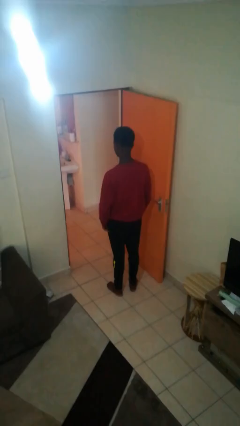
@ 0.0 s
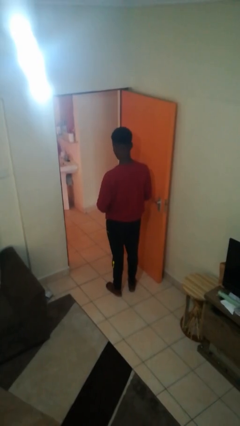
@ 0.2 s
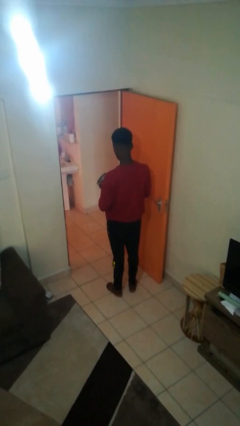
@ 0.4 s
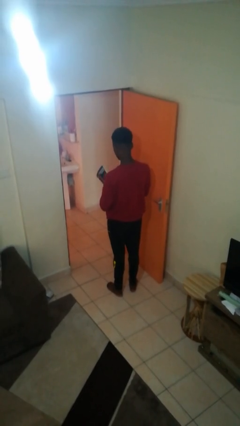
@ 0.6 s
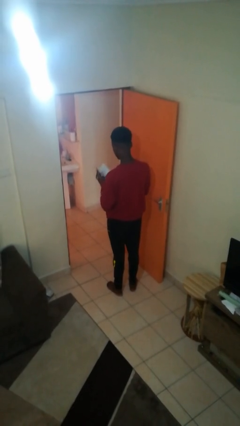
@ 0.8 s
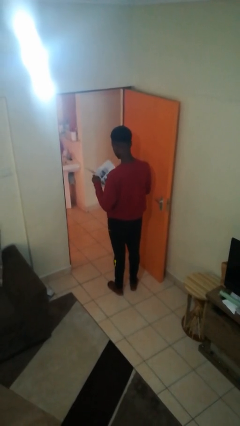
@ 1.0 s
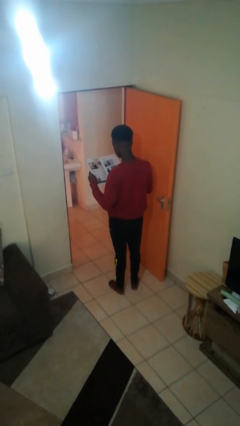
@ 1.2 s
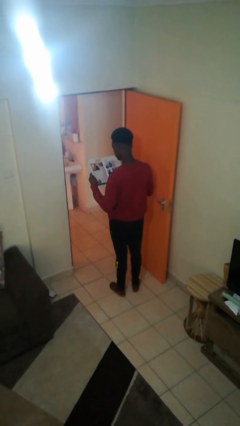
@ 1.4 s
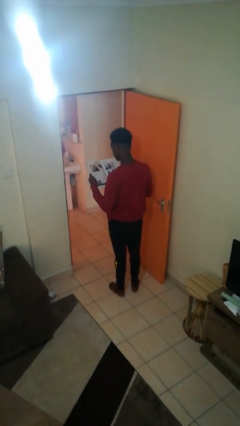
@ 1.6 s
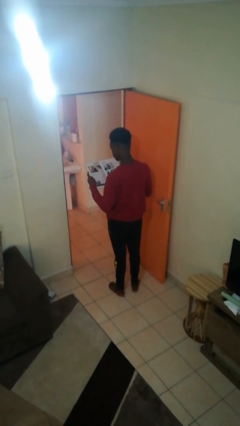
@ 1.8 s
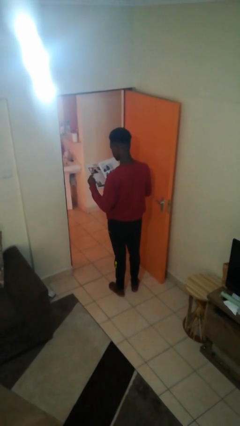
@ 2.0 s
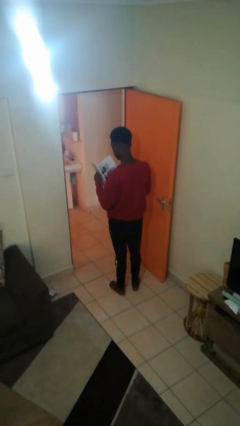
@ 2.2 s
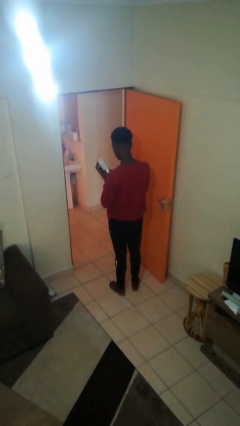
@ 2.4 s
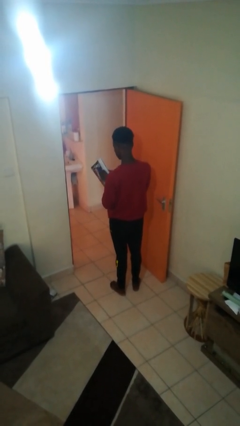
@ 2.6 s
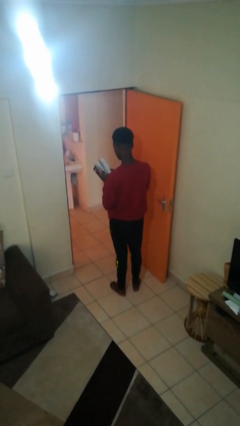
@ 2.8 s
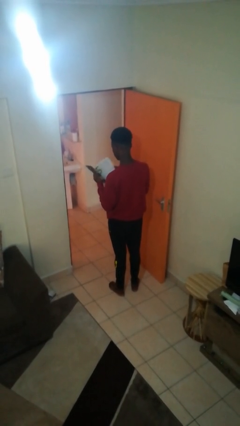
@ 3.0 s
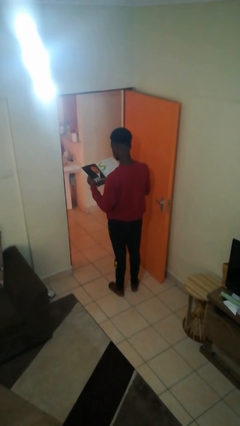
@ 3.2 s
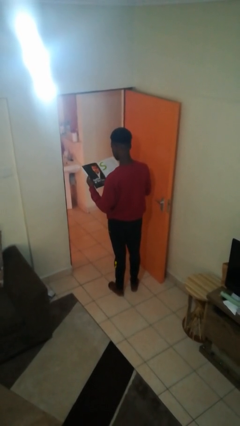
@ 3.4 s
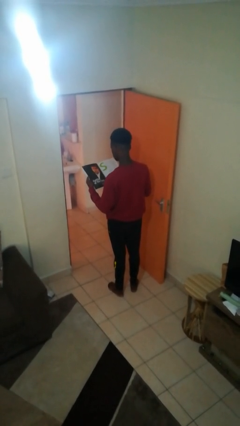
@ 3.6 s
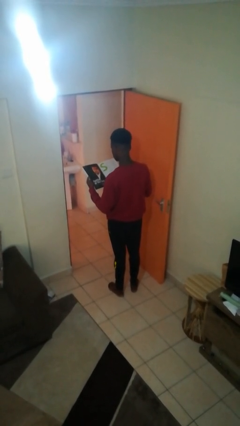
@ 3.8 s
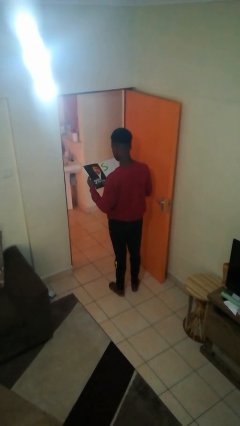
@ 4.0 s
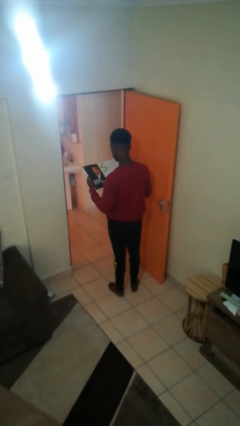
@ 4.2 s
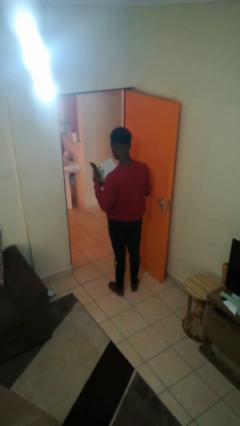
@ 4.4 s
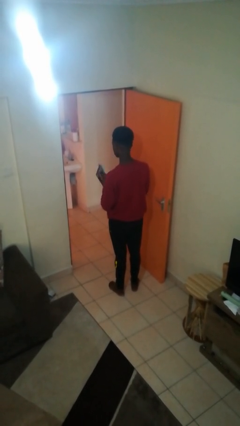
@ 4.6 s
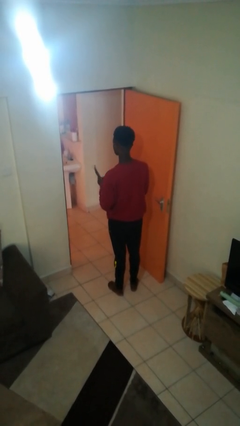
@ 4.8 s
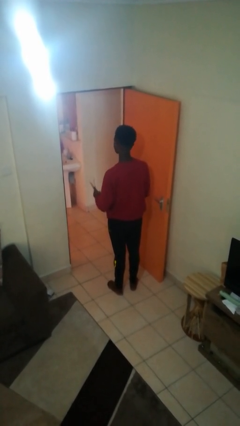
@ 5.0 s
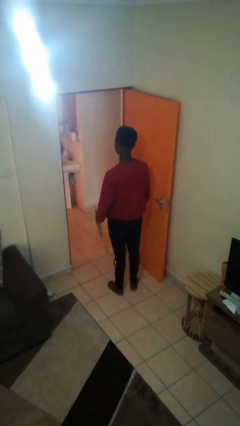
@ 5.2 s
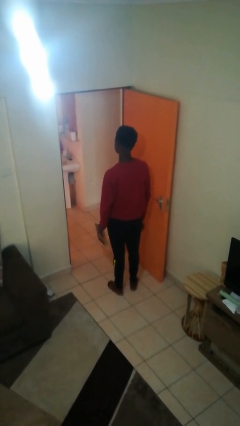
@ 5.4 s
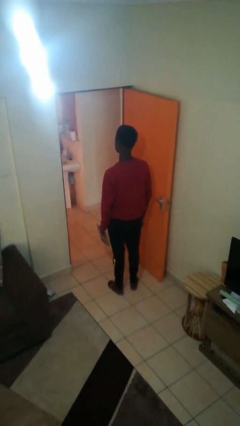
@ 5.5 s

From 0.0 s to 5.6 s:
person reads magazine

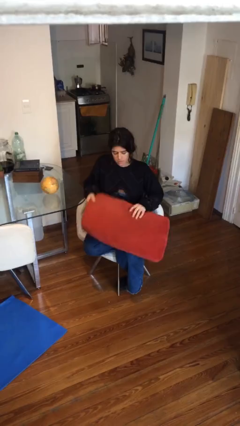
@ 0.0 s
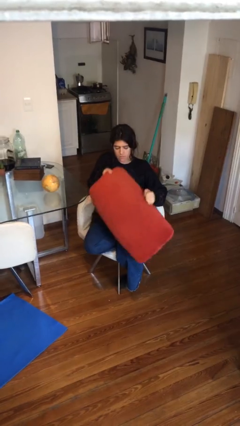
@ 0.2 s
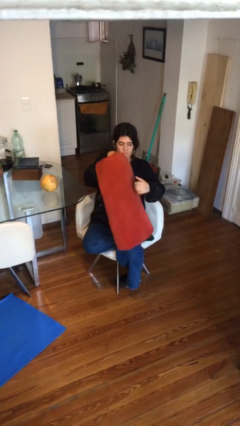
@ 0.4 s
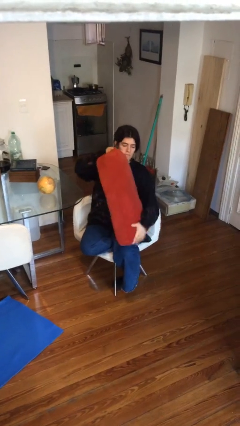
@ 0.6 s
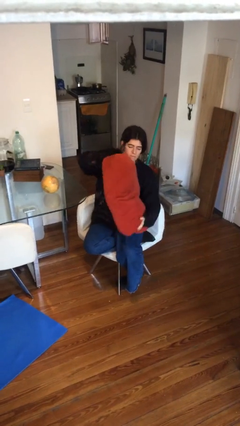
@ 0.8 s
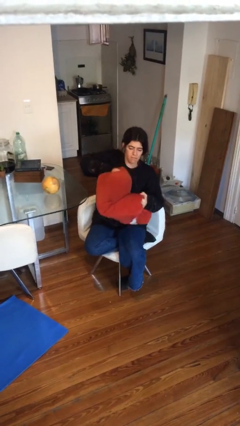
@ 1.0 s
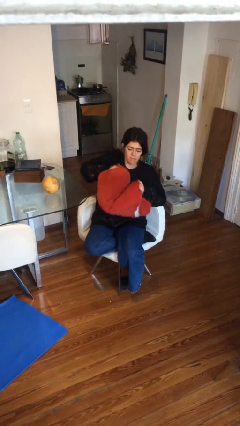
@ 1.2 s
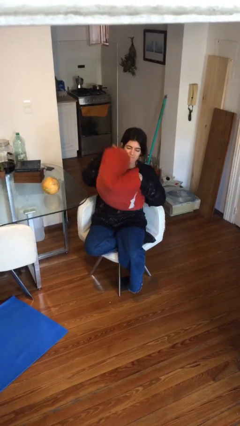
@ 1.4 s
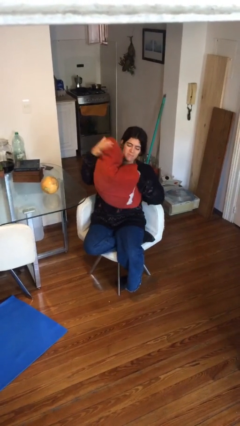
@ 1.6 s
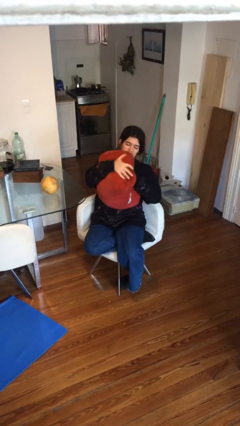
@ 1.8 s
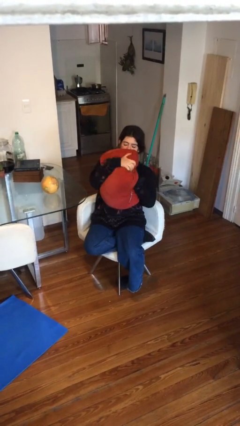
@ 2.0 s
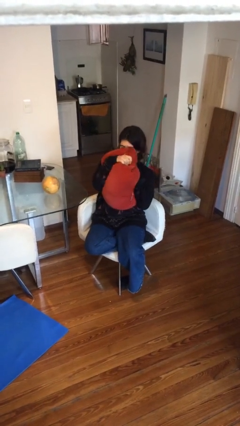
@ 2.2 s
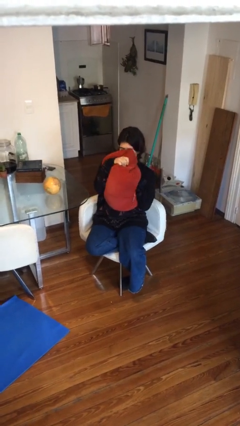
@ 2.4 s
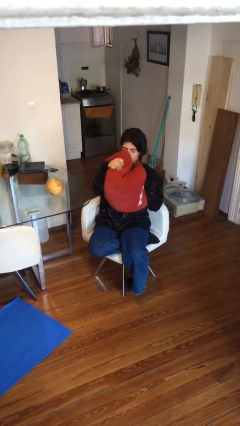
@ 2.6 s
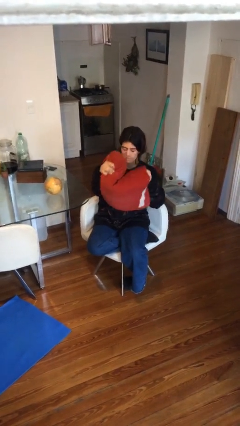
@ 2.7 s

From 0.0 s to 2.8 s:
person squeezes object

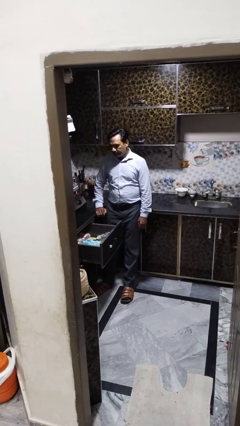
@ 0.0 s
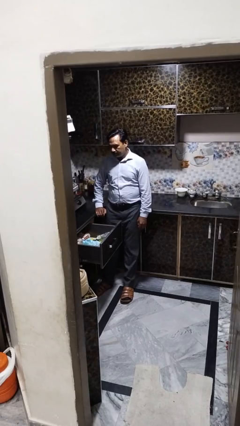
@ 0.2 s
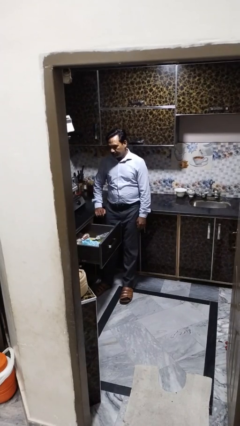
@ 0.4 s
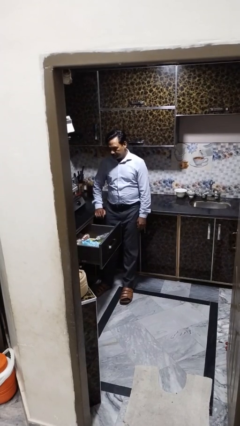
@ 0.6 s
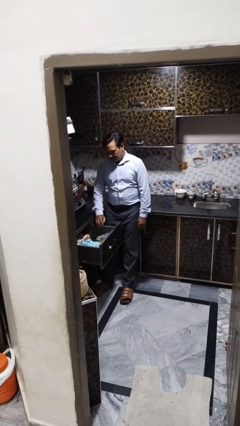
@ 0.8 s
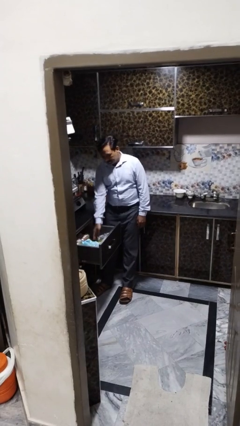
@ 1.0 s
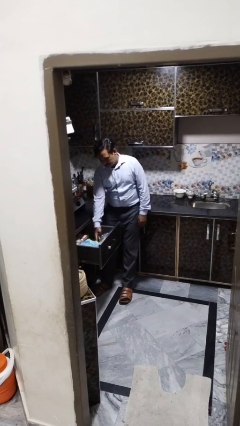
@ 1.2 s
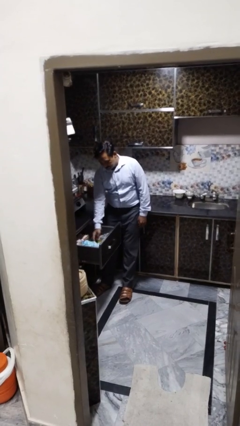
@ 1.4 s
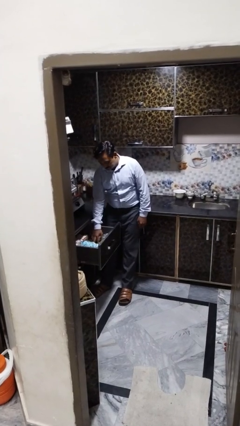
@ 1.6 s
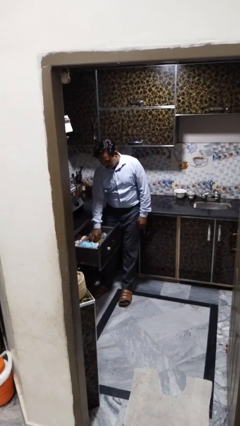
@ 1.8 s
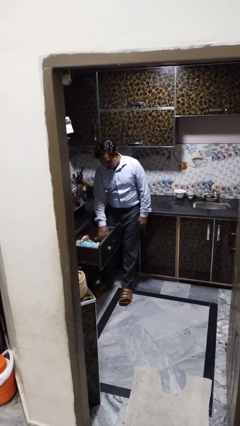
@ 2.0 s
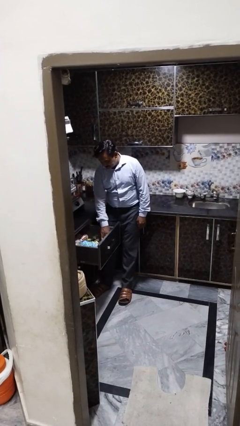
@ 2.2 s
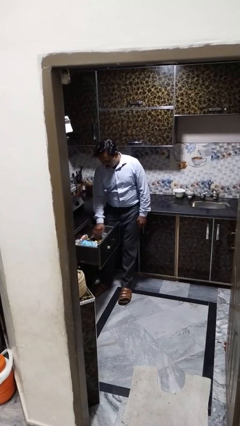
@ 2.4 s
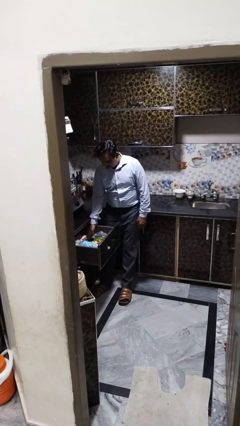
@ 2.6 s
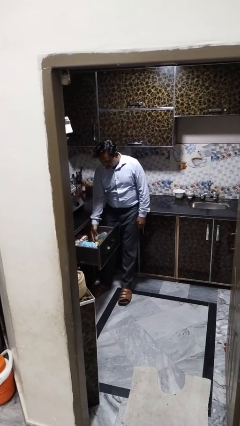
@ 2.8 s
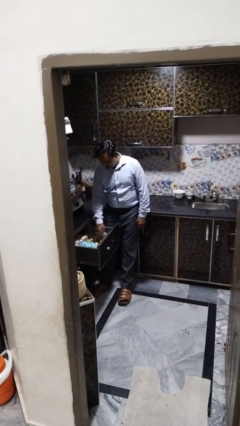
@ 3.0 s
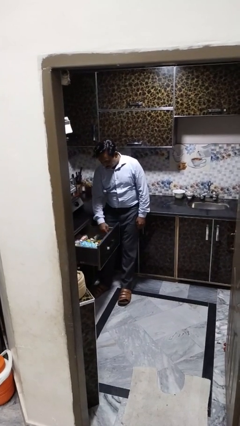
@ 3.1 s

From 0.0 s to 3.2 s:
person searches in kitchen drawer

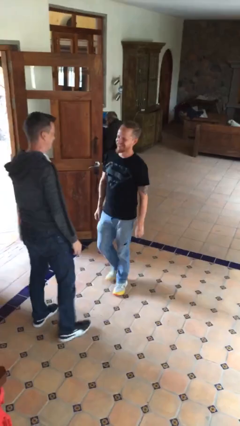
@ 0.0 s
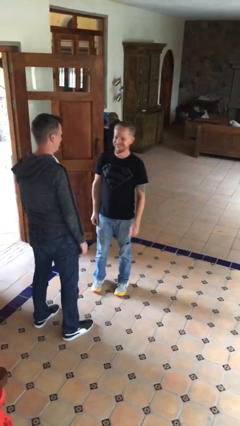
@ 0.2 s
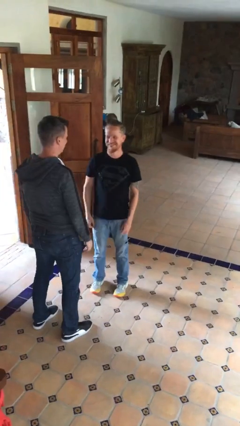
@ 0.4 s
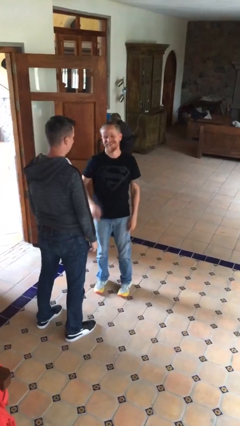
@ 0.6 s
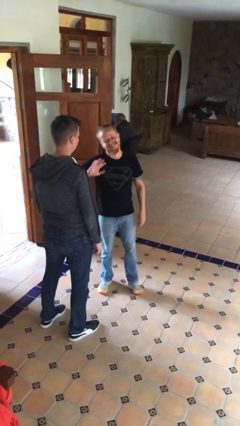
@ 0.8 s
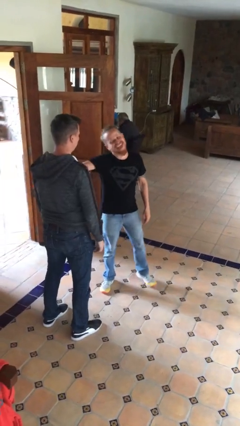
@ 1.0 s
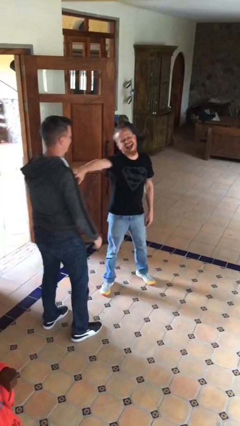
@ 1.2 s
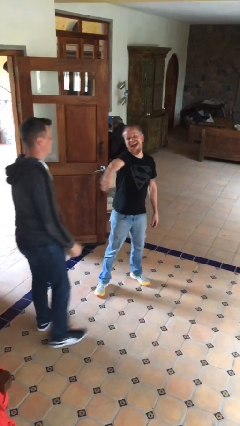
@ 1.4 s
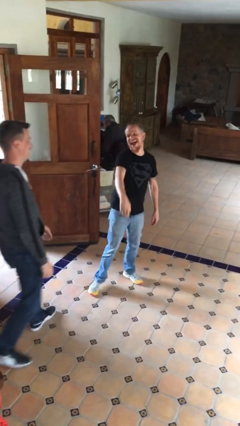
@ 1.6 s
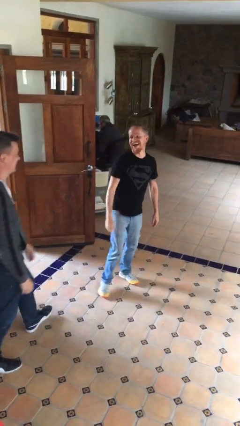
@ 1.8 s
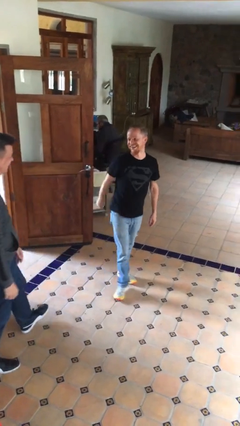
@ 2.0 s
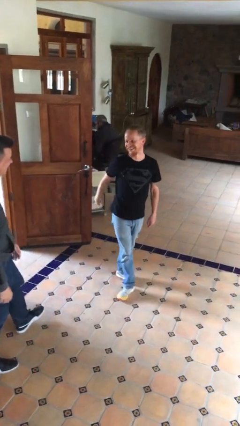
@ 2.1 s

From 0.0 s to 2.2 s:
person shoves person

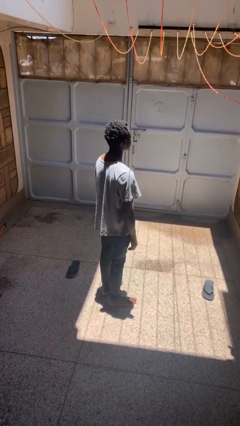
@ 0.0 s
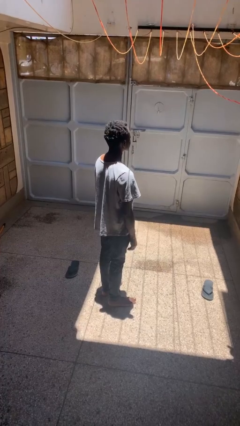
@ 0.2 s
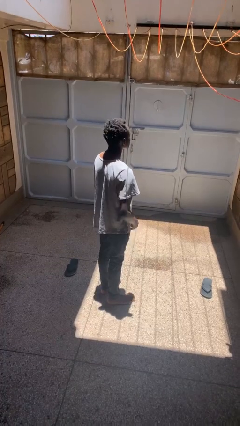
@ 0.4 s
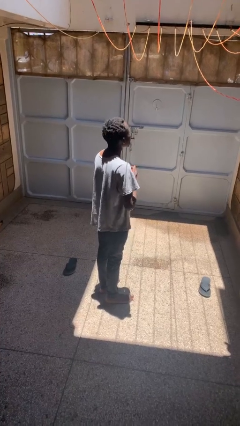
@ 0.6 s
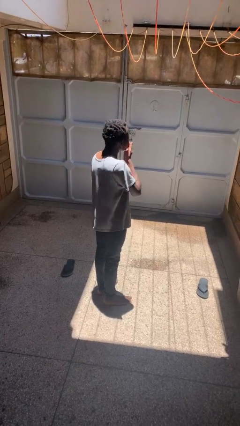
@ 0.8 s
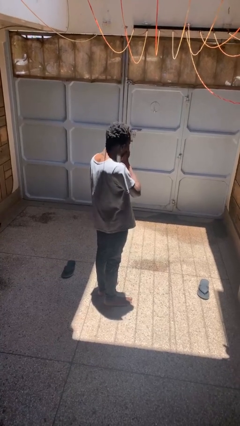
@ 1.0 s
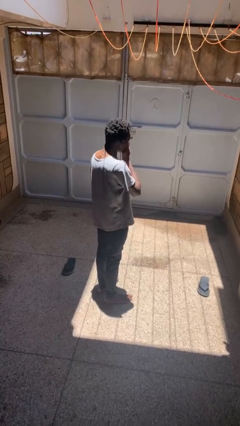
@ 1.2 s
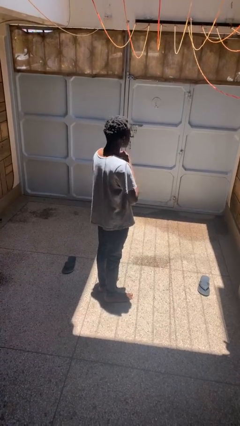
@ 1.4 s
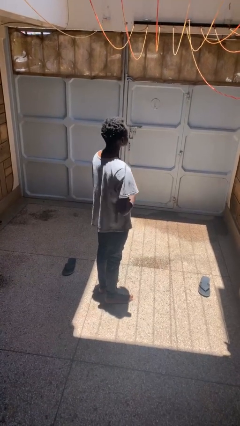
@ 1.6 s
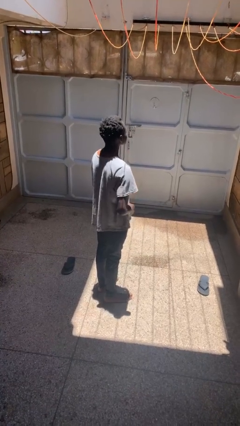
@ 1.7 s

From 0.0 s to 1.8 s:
person sneezes into hand

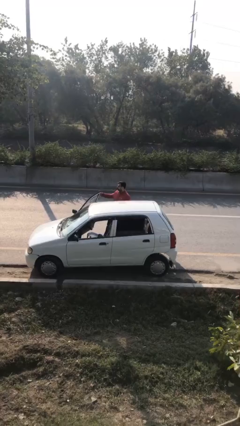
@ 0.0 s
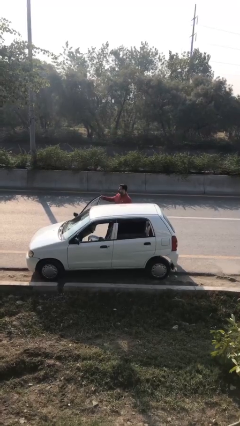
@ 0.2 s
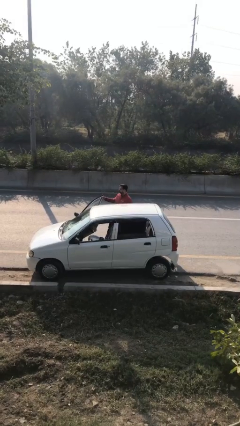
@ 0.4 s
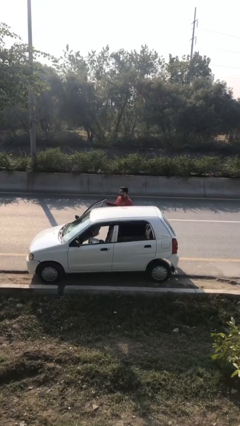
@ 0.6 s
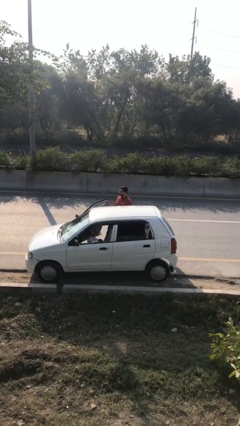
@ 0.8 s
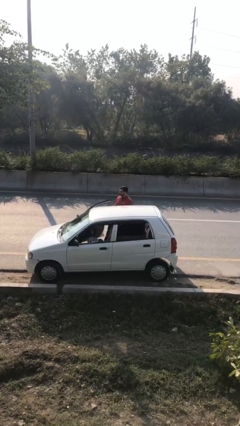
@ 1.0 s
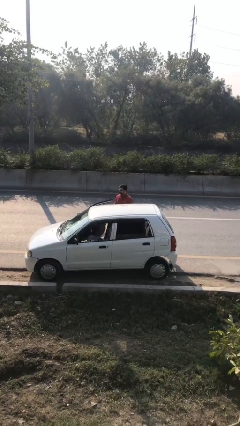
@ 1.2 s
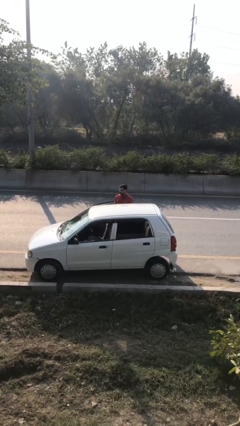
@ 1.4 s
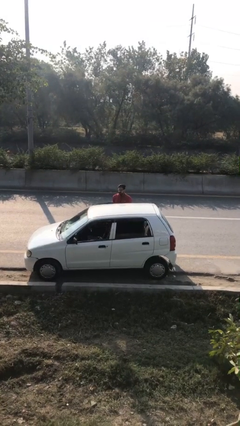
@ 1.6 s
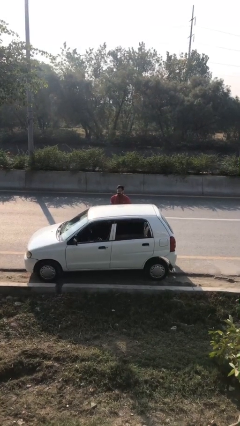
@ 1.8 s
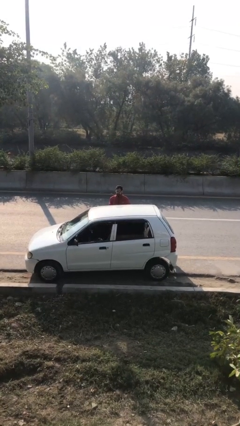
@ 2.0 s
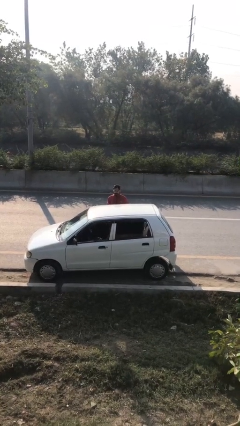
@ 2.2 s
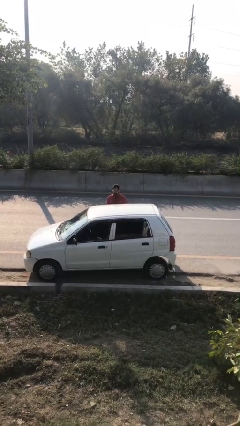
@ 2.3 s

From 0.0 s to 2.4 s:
person closes car door
